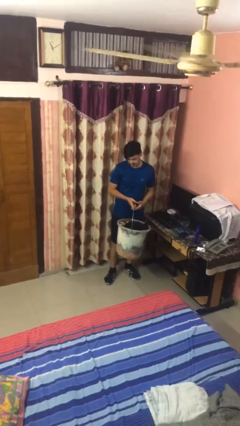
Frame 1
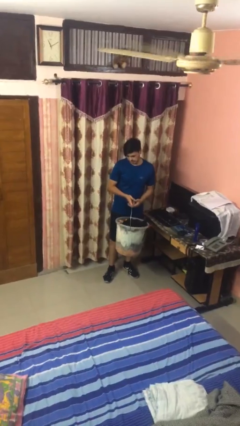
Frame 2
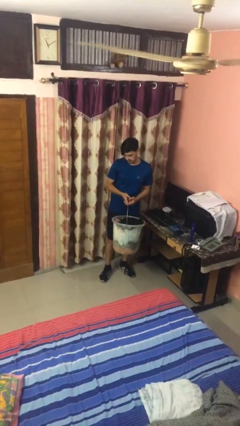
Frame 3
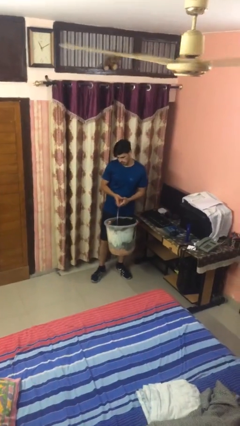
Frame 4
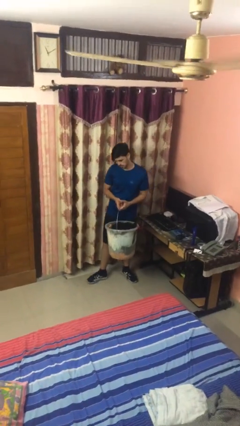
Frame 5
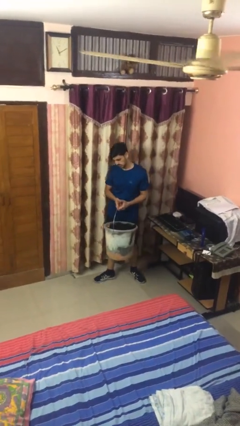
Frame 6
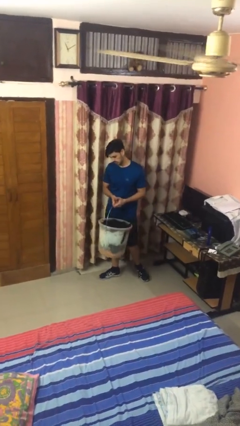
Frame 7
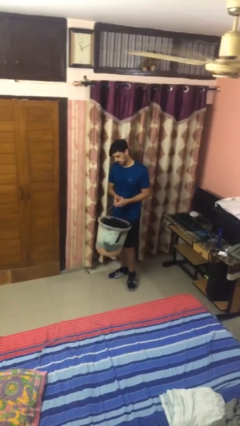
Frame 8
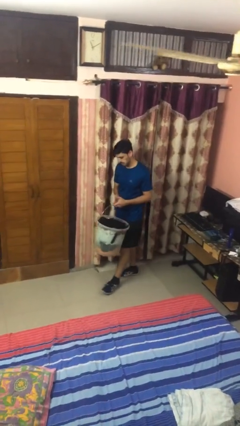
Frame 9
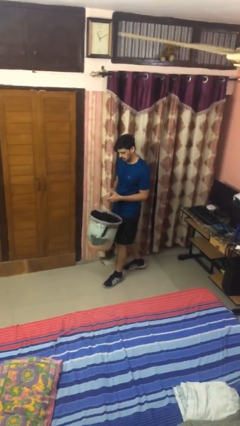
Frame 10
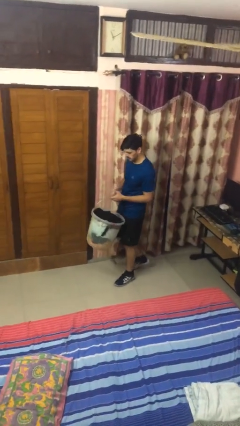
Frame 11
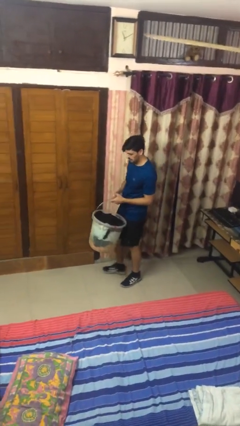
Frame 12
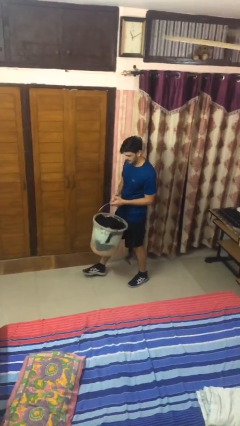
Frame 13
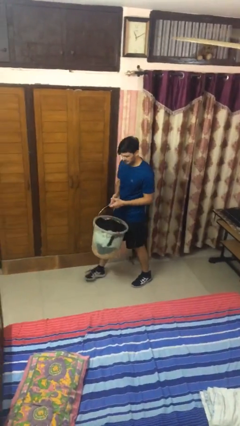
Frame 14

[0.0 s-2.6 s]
person carries laundry basket

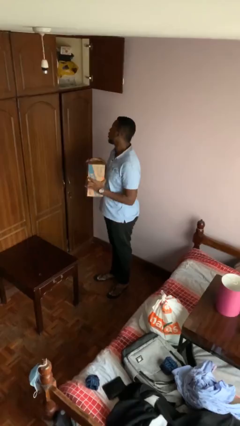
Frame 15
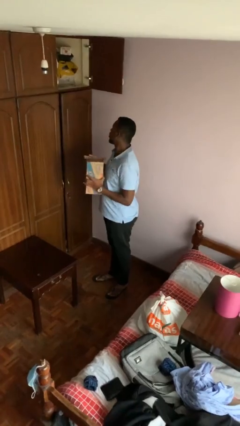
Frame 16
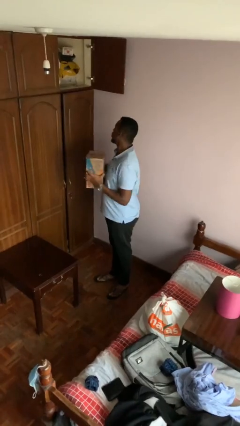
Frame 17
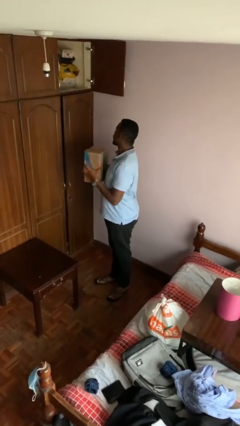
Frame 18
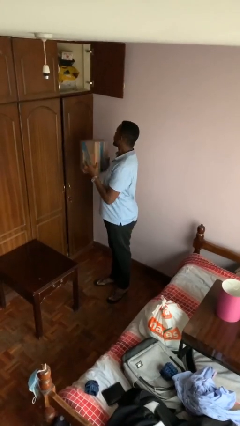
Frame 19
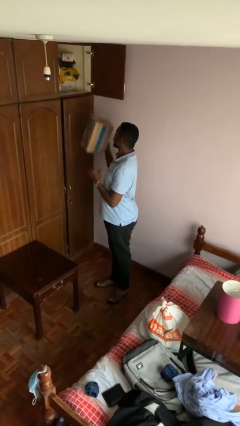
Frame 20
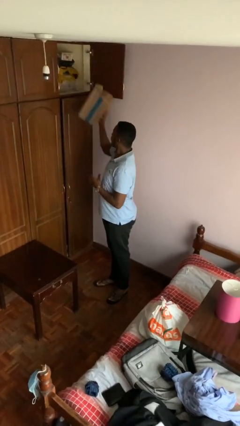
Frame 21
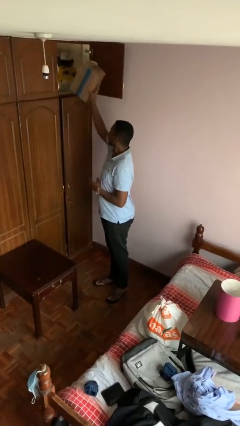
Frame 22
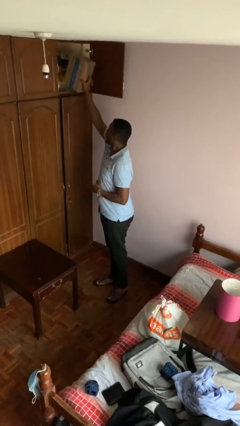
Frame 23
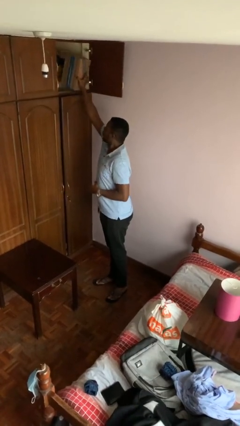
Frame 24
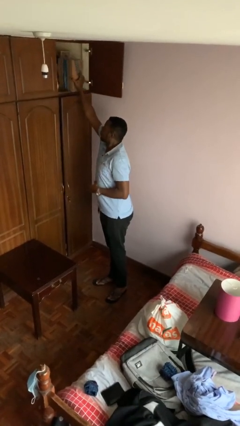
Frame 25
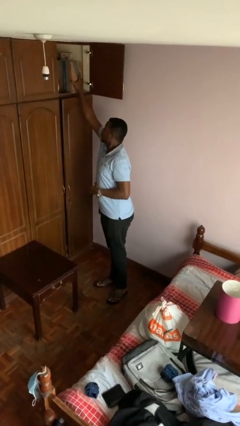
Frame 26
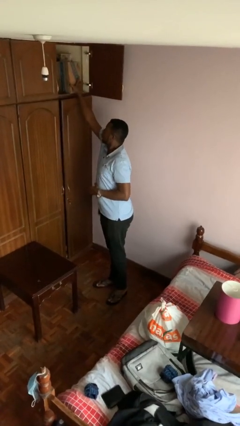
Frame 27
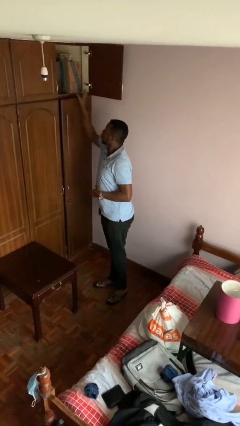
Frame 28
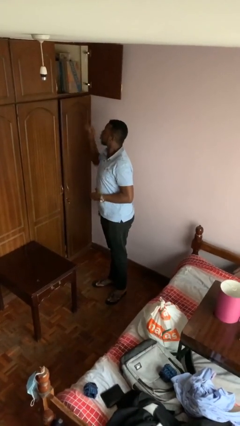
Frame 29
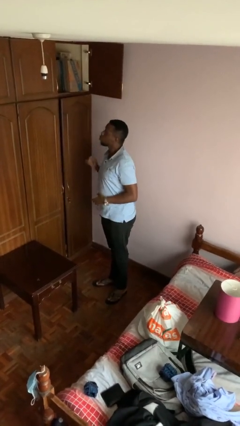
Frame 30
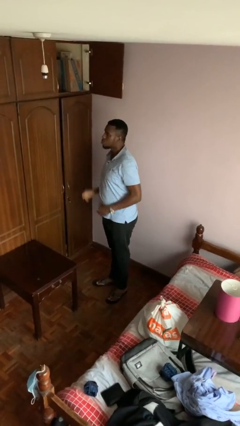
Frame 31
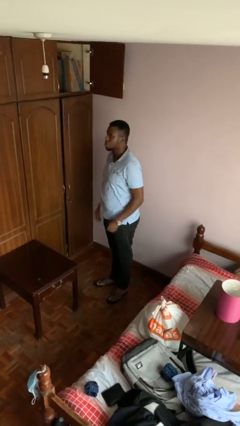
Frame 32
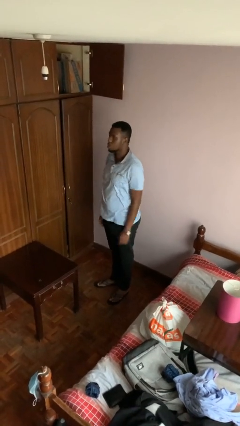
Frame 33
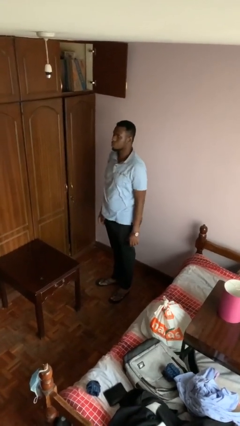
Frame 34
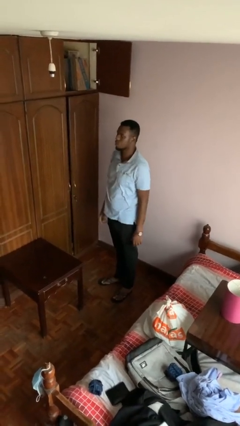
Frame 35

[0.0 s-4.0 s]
person puts down object on shelf

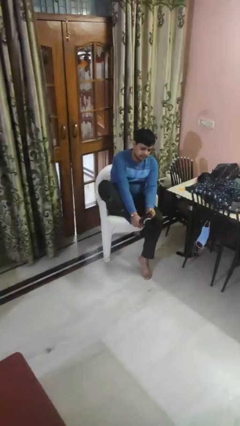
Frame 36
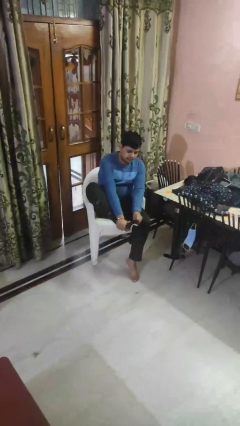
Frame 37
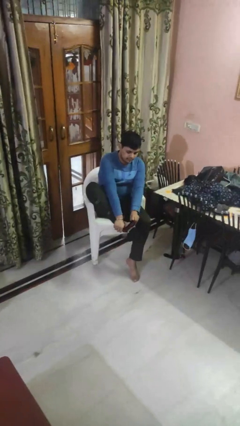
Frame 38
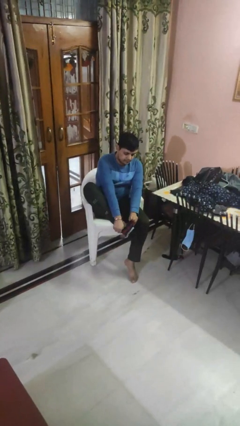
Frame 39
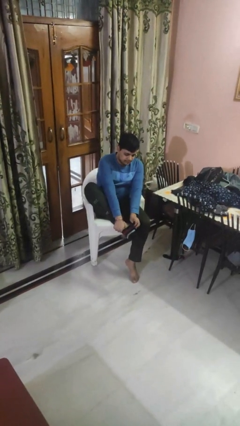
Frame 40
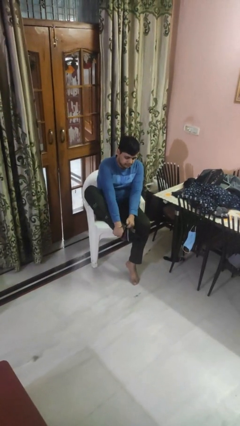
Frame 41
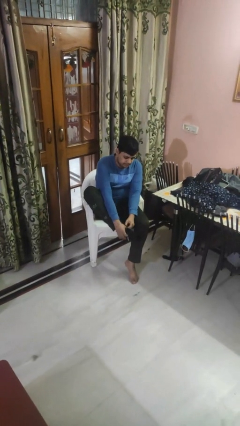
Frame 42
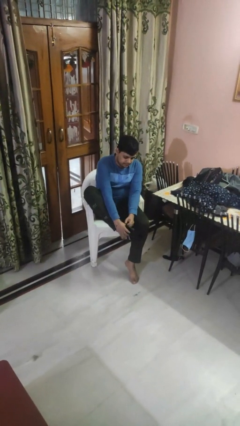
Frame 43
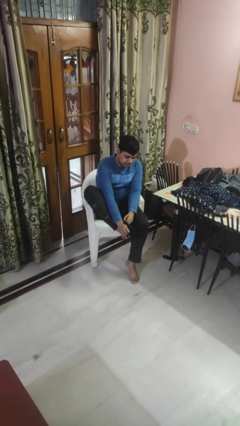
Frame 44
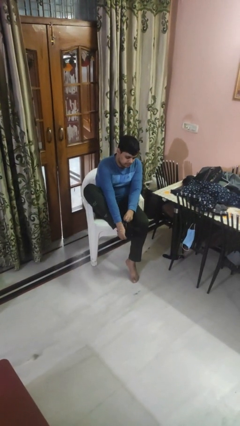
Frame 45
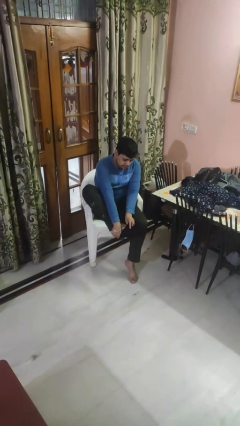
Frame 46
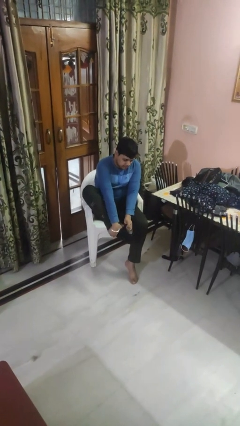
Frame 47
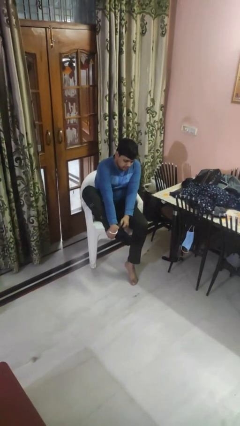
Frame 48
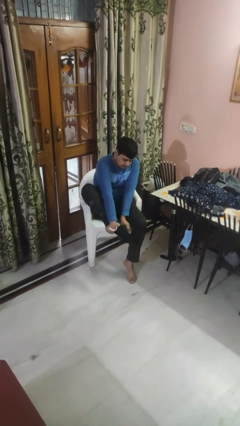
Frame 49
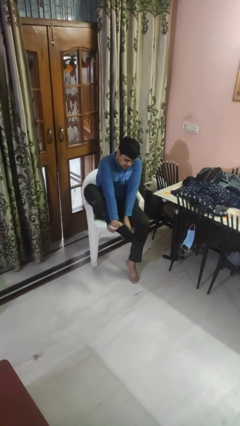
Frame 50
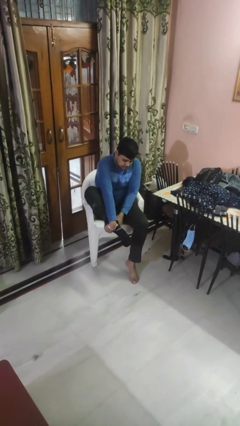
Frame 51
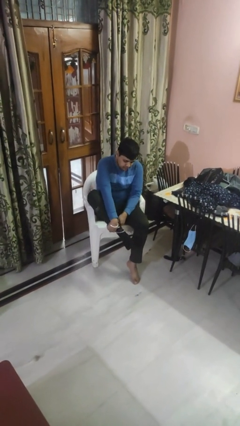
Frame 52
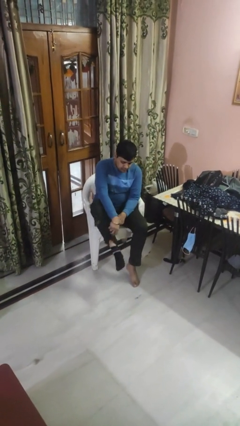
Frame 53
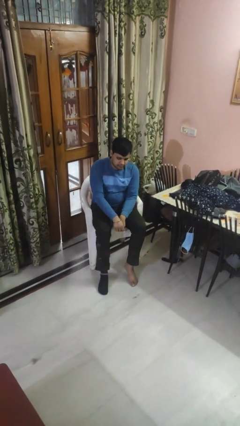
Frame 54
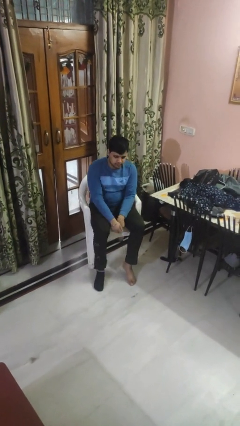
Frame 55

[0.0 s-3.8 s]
person puts on socks

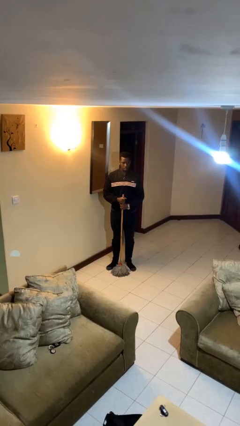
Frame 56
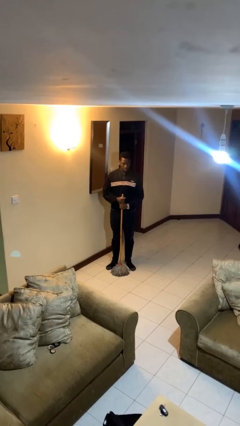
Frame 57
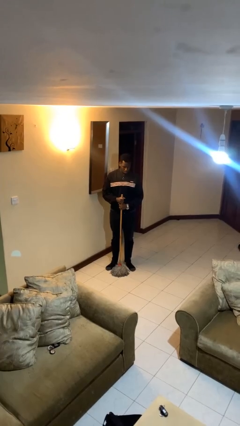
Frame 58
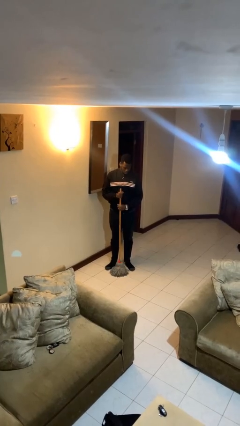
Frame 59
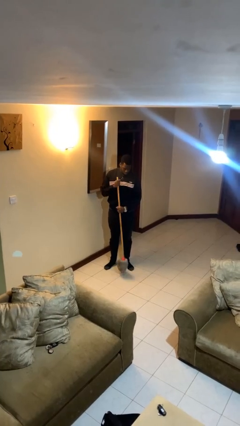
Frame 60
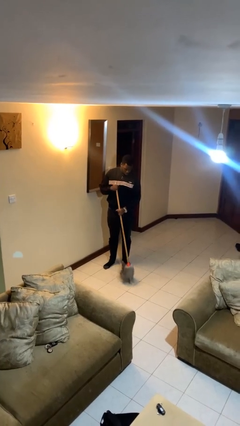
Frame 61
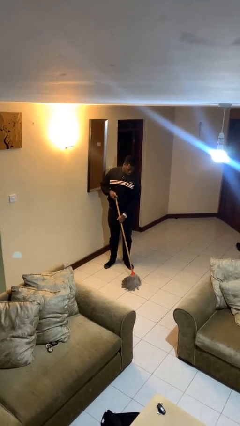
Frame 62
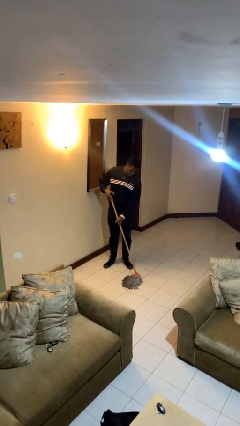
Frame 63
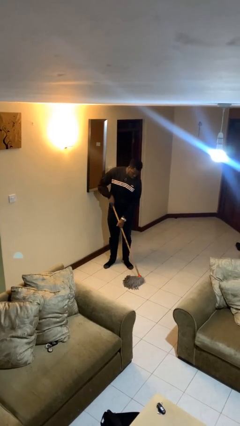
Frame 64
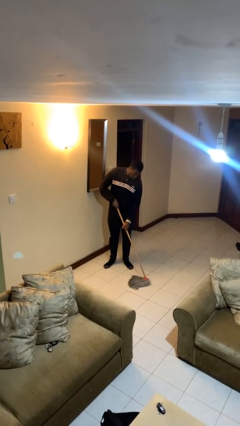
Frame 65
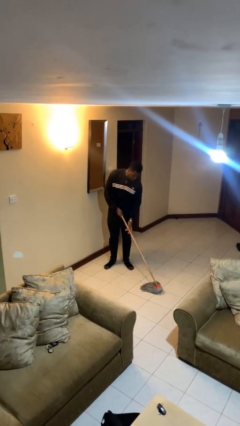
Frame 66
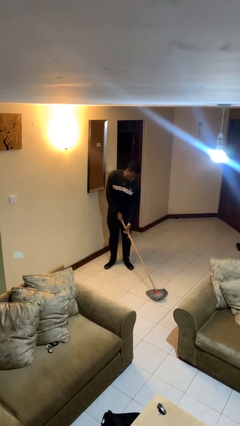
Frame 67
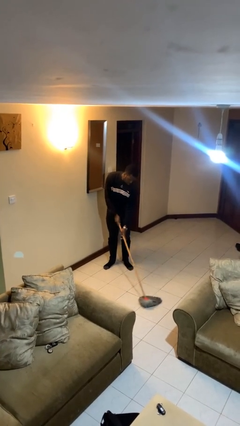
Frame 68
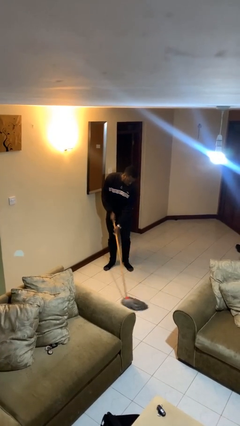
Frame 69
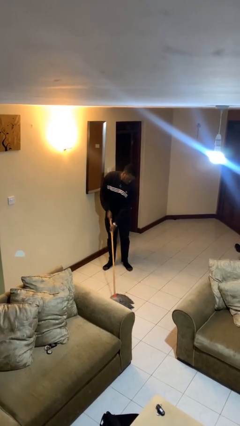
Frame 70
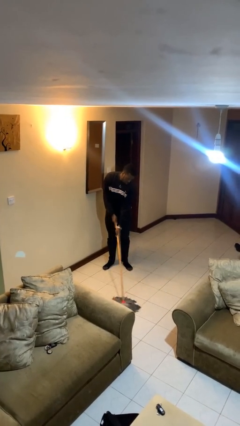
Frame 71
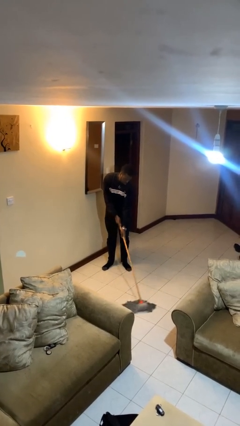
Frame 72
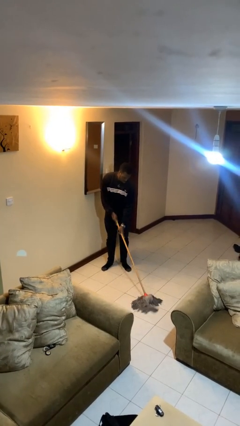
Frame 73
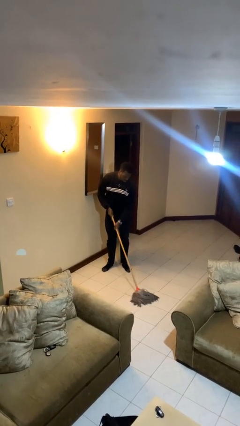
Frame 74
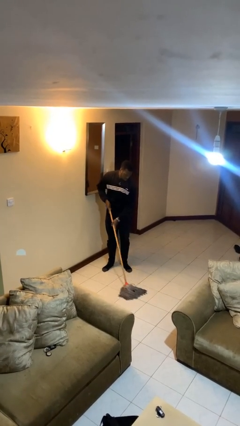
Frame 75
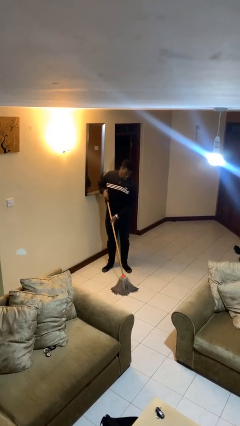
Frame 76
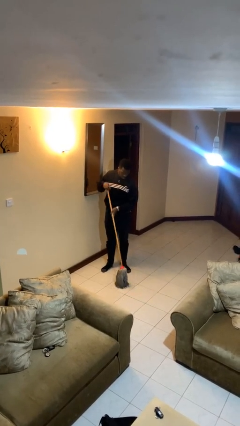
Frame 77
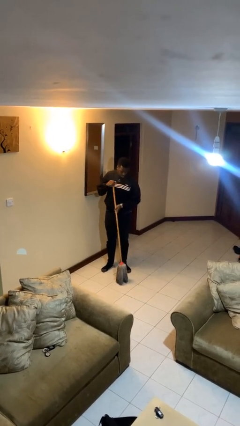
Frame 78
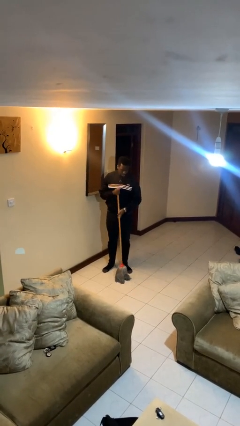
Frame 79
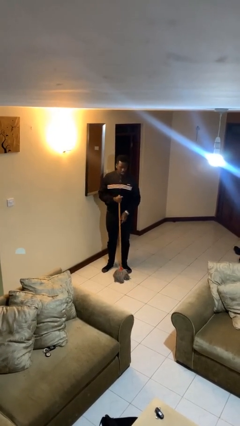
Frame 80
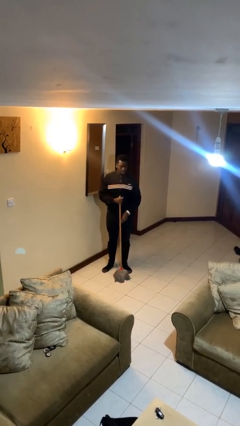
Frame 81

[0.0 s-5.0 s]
person mops

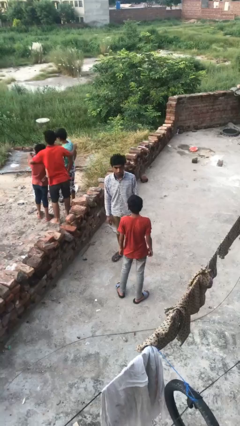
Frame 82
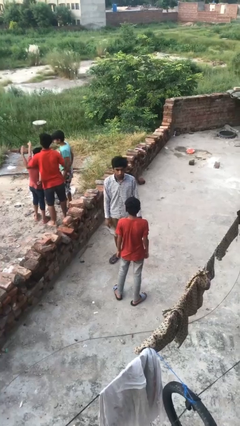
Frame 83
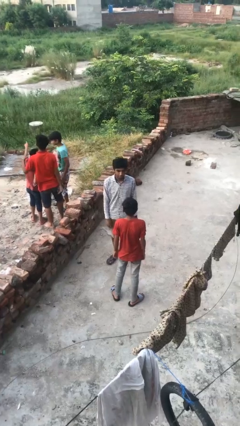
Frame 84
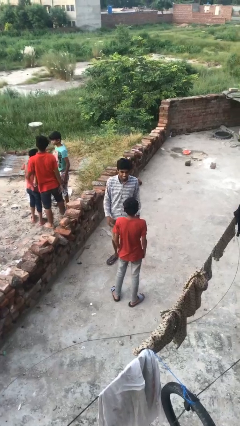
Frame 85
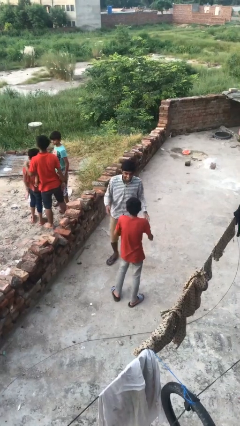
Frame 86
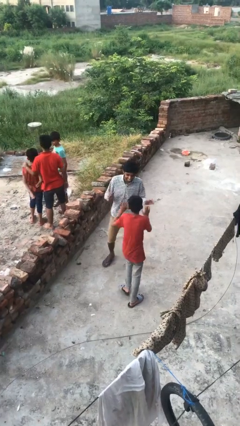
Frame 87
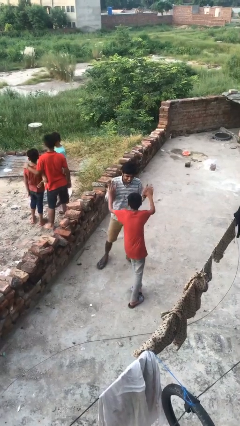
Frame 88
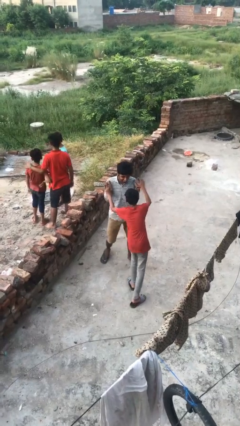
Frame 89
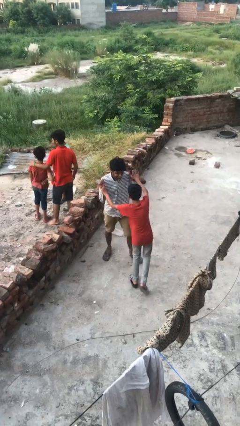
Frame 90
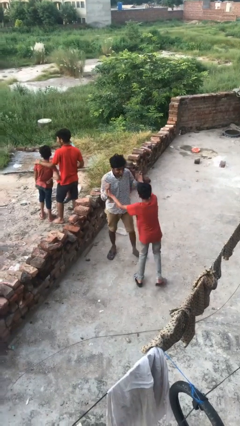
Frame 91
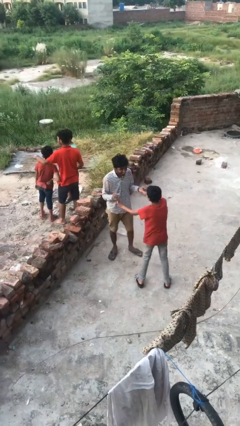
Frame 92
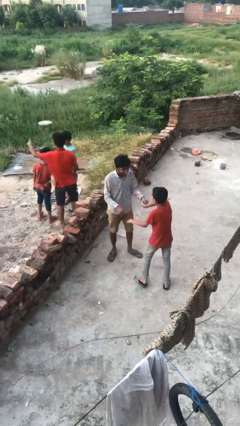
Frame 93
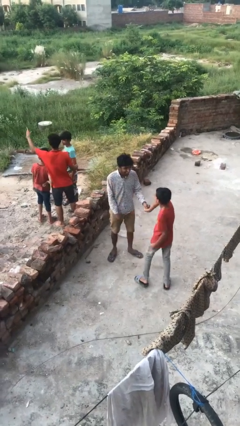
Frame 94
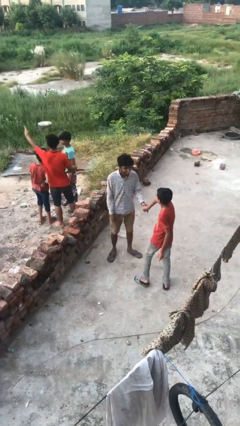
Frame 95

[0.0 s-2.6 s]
person laughs with person
